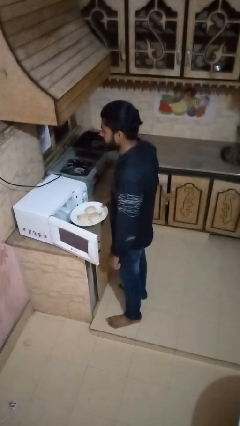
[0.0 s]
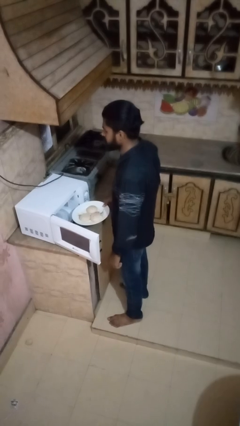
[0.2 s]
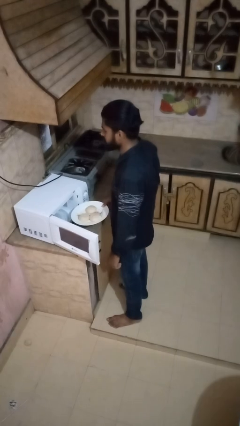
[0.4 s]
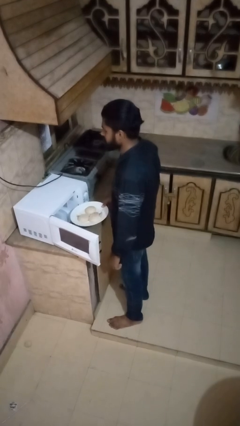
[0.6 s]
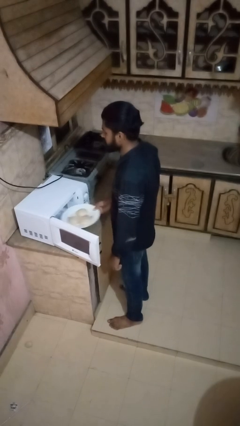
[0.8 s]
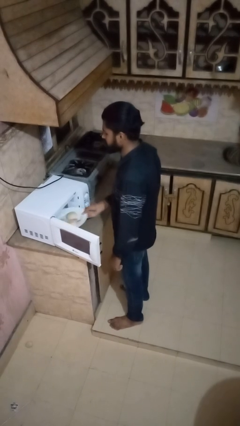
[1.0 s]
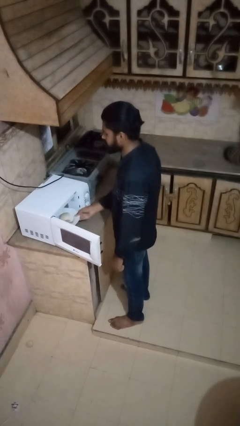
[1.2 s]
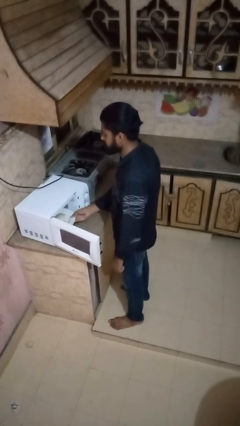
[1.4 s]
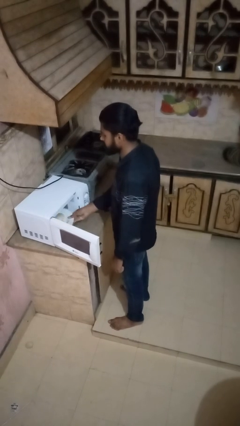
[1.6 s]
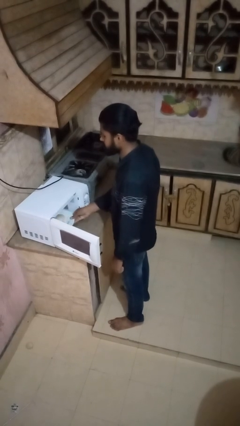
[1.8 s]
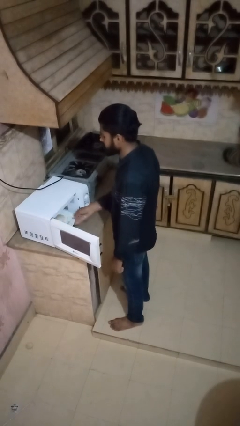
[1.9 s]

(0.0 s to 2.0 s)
person puts object into oven

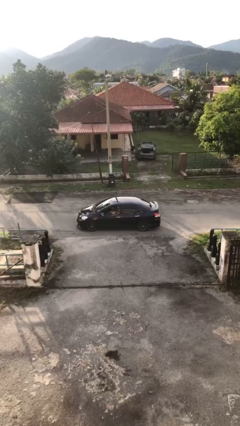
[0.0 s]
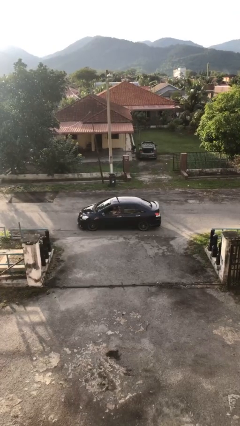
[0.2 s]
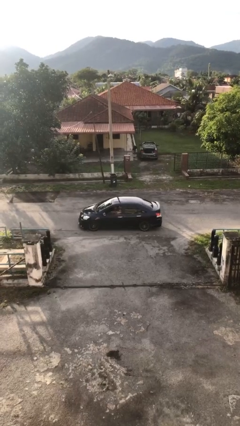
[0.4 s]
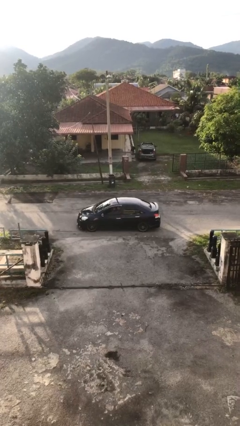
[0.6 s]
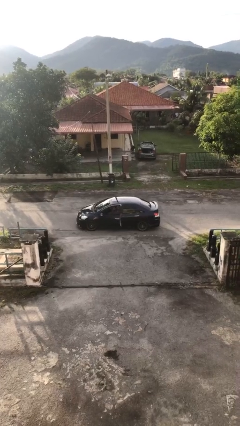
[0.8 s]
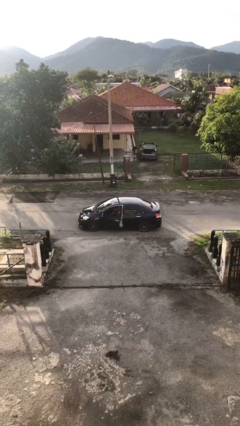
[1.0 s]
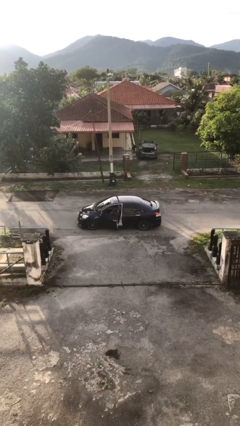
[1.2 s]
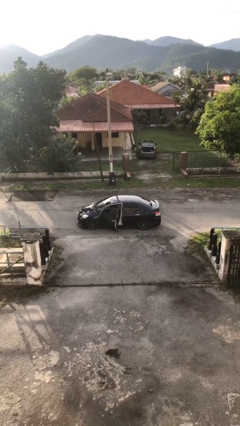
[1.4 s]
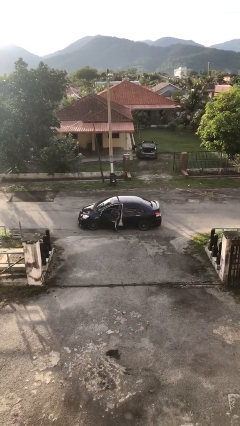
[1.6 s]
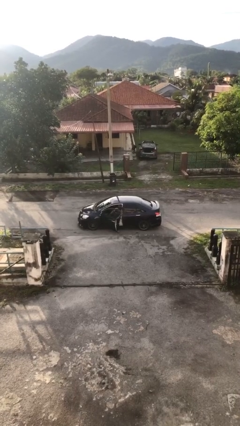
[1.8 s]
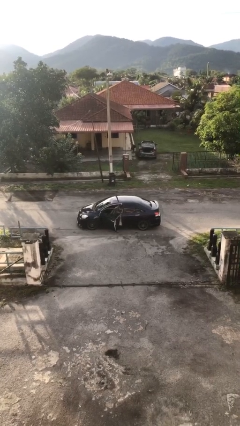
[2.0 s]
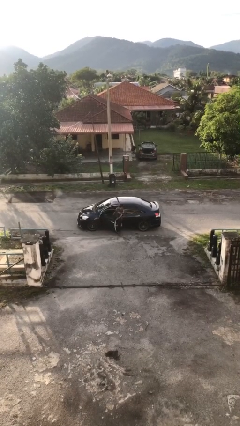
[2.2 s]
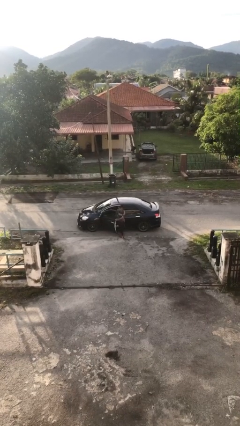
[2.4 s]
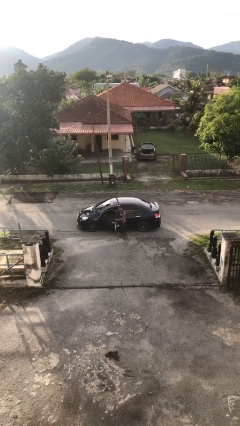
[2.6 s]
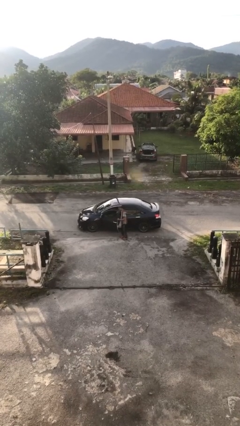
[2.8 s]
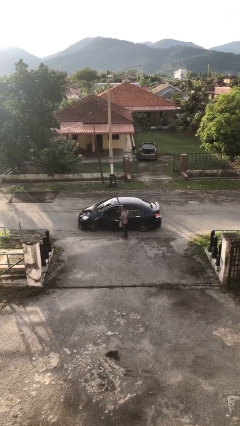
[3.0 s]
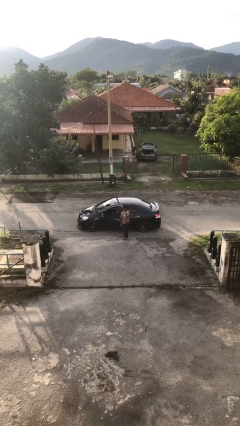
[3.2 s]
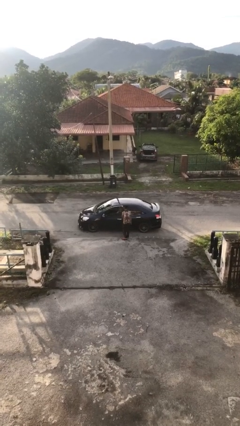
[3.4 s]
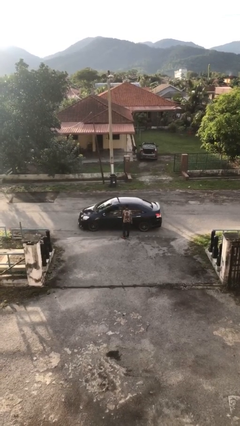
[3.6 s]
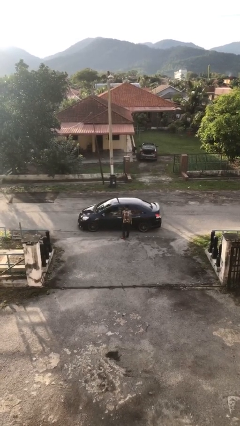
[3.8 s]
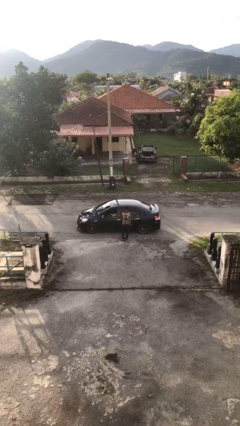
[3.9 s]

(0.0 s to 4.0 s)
car drops off person

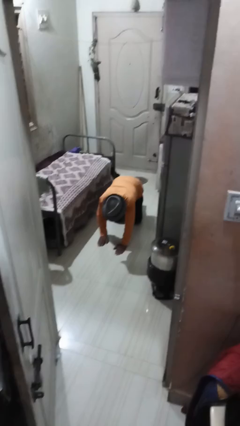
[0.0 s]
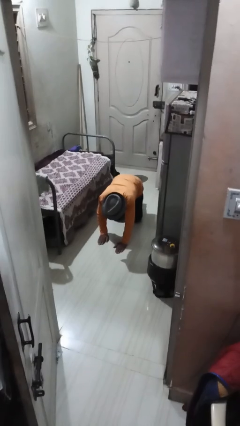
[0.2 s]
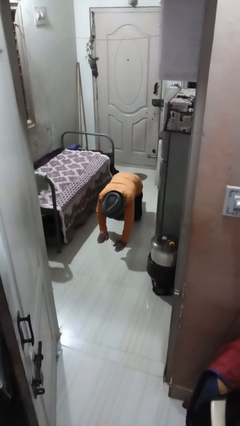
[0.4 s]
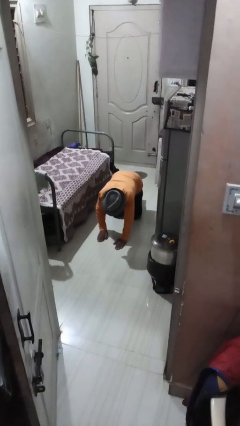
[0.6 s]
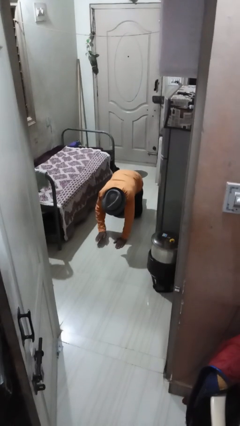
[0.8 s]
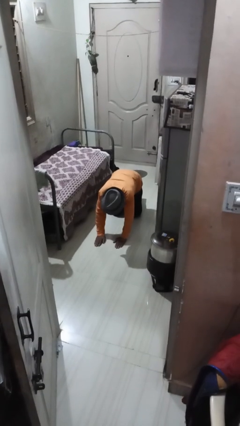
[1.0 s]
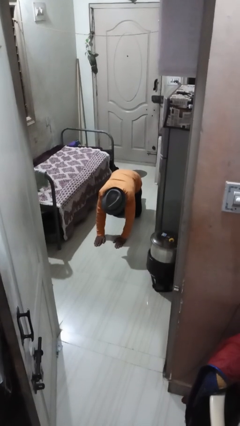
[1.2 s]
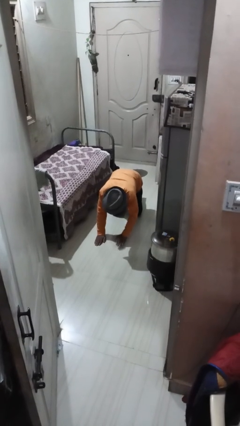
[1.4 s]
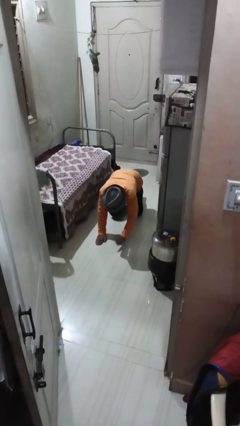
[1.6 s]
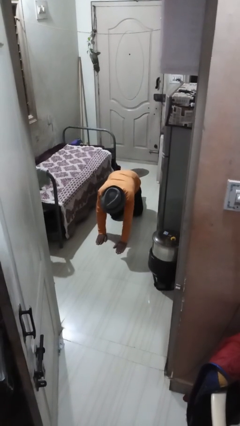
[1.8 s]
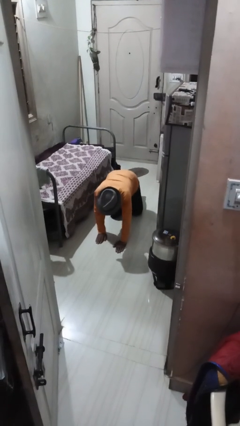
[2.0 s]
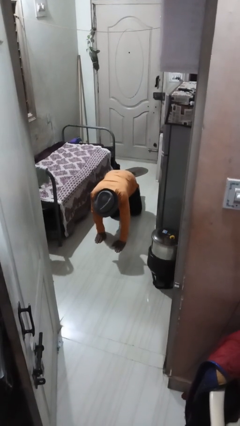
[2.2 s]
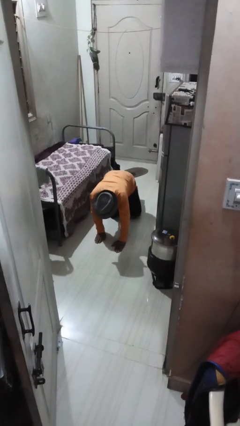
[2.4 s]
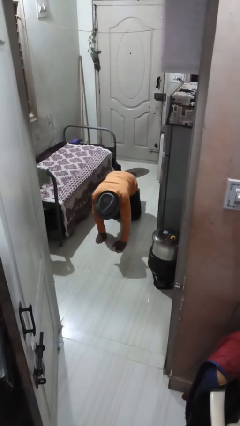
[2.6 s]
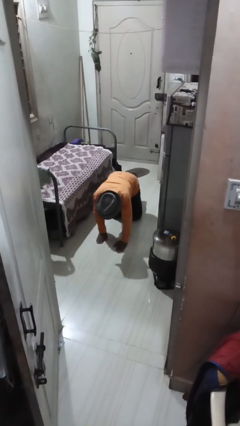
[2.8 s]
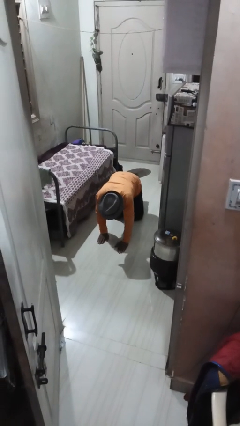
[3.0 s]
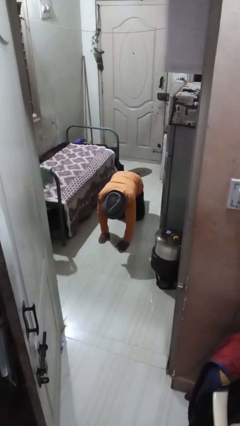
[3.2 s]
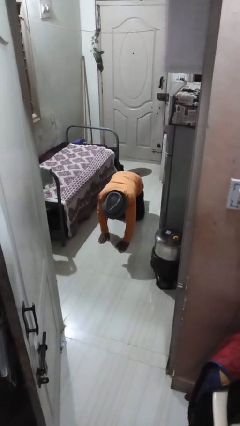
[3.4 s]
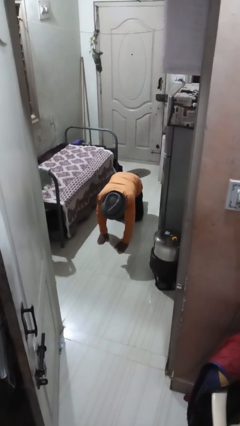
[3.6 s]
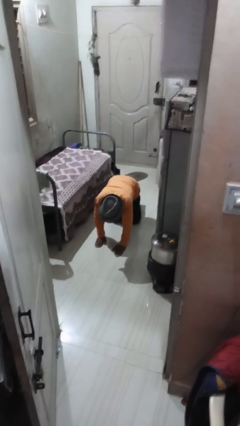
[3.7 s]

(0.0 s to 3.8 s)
person crawls

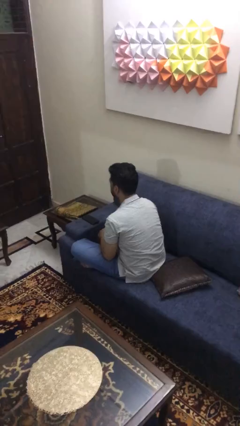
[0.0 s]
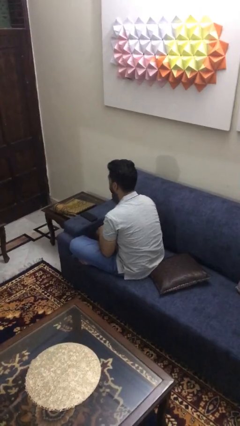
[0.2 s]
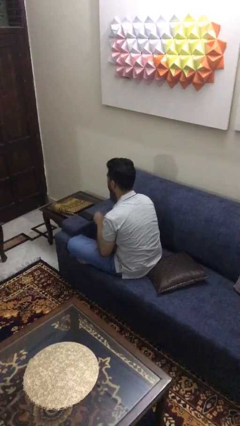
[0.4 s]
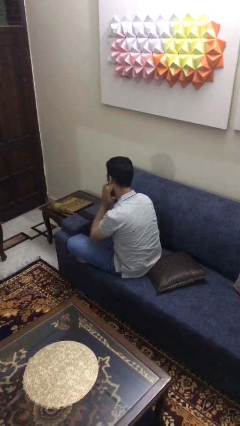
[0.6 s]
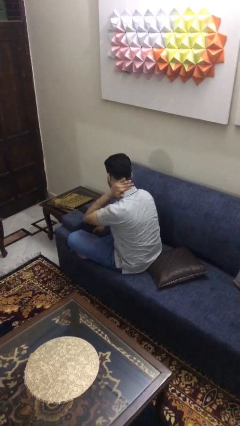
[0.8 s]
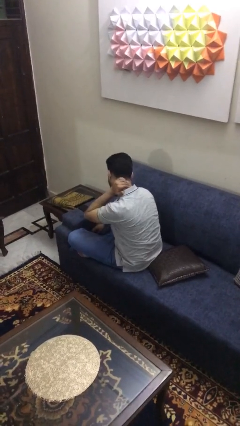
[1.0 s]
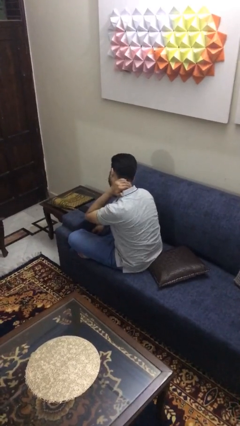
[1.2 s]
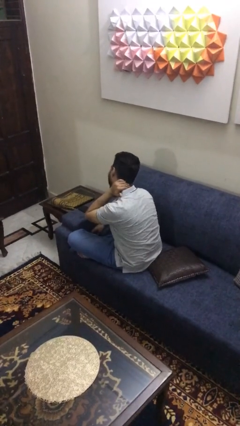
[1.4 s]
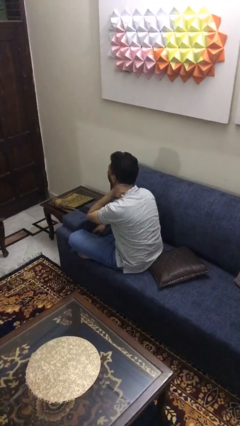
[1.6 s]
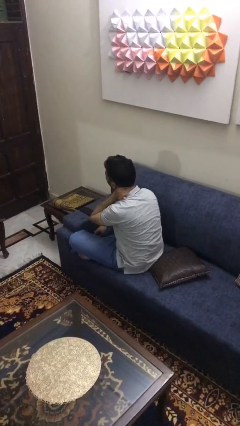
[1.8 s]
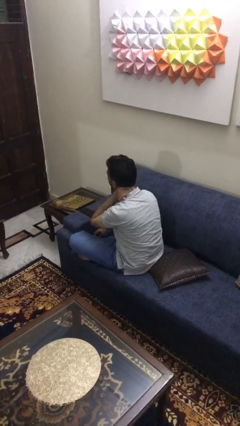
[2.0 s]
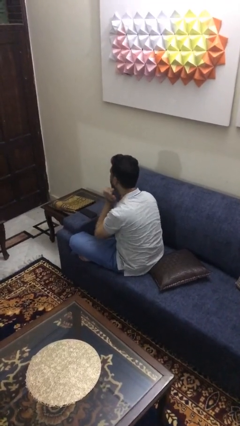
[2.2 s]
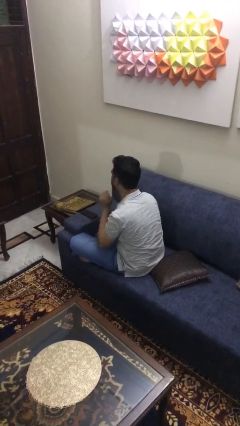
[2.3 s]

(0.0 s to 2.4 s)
person rubs neck

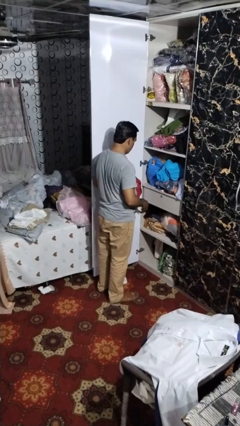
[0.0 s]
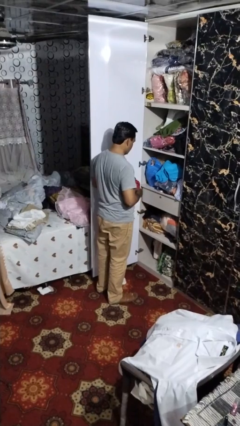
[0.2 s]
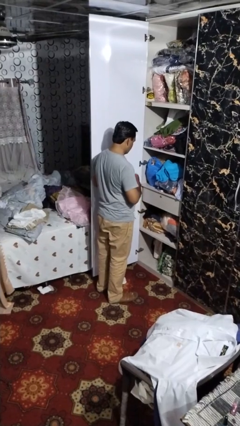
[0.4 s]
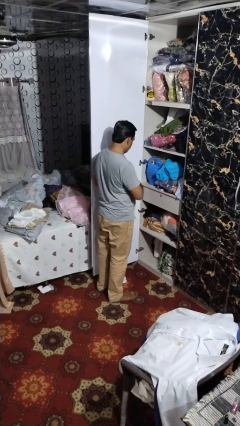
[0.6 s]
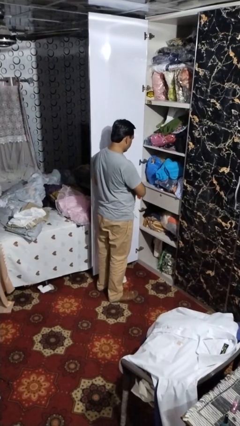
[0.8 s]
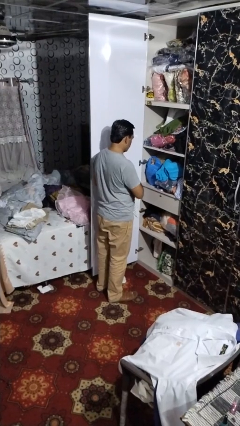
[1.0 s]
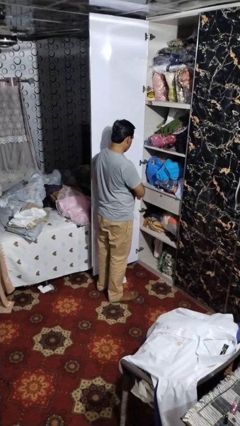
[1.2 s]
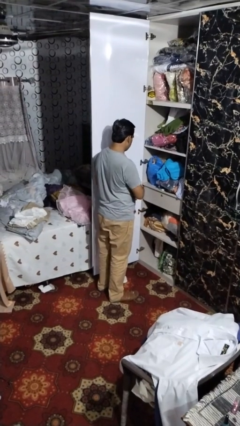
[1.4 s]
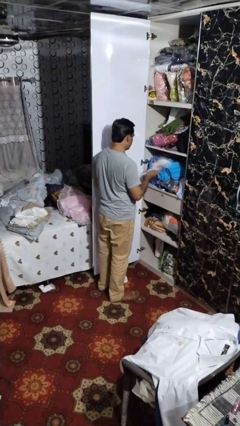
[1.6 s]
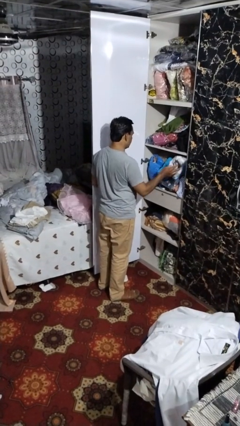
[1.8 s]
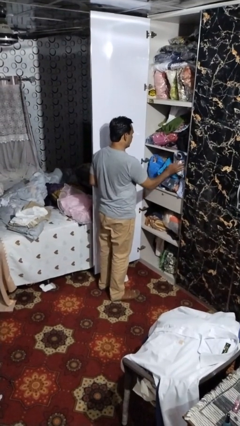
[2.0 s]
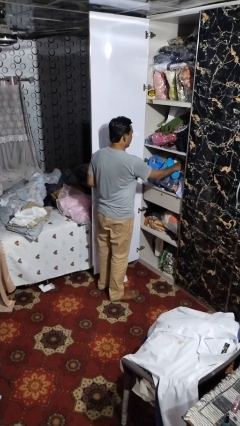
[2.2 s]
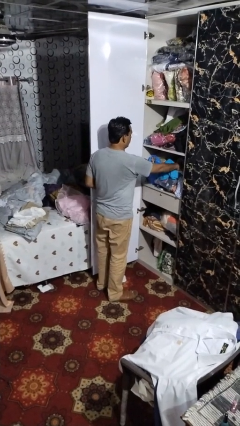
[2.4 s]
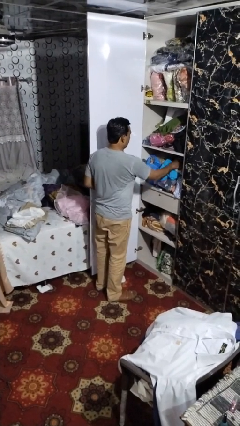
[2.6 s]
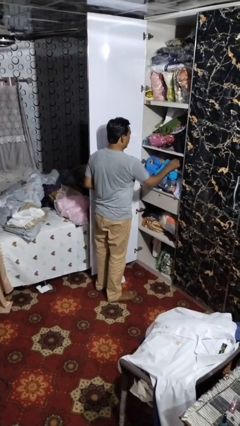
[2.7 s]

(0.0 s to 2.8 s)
person puts clothes into dresser

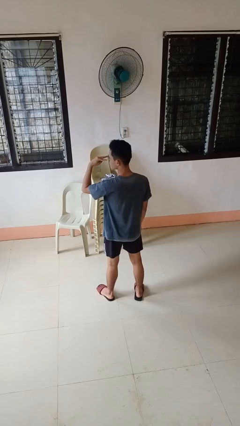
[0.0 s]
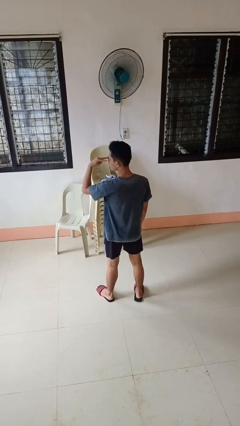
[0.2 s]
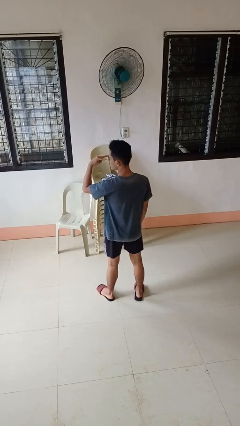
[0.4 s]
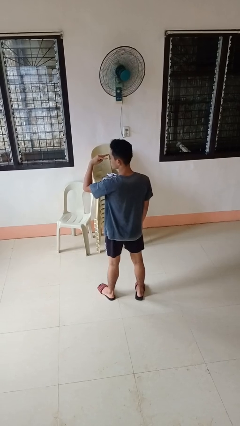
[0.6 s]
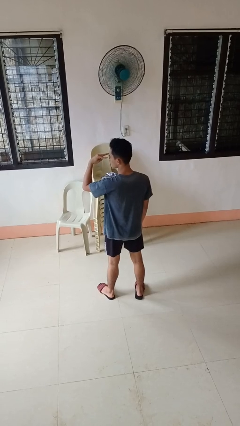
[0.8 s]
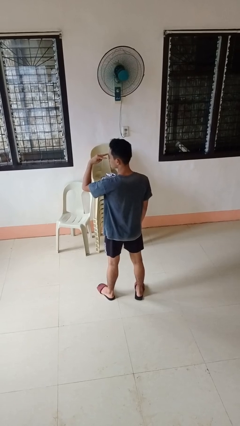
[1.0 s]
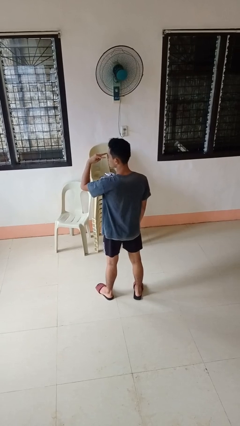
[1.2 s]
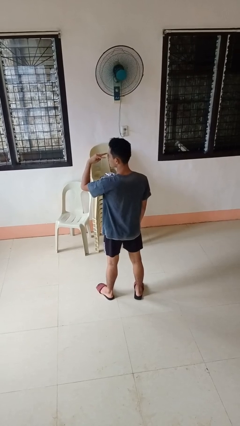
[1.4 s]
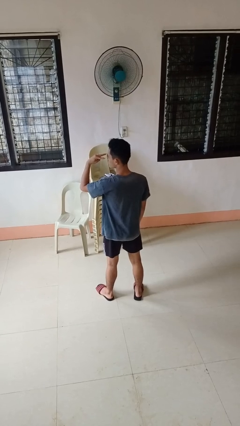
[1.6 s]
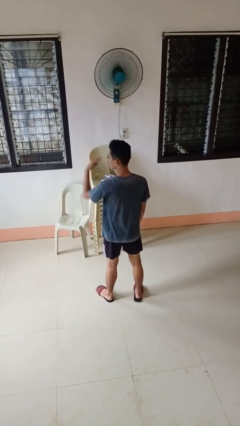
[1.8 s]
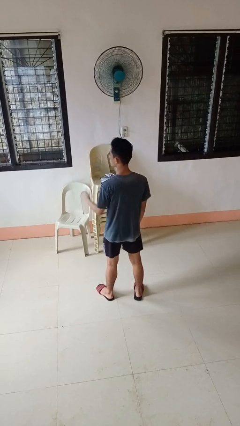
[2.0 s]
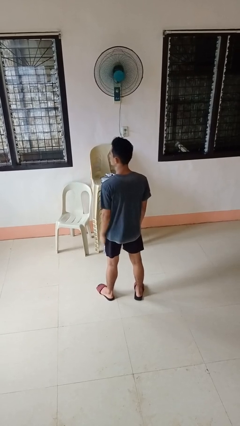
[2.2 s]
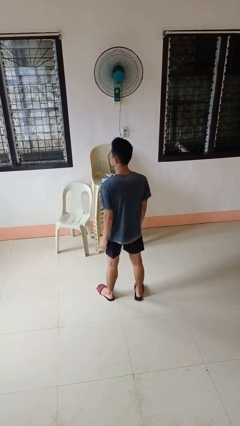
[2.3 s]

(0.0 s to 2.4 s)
person gestures watch closely

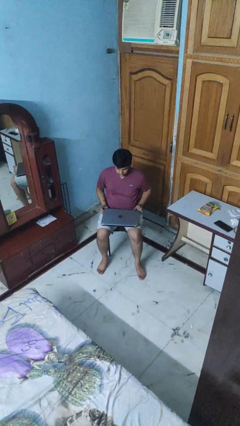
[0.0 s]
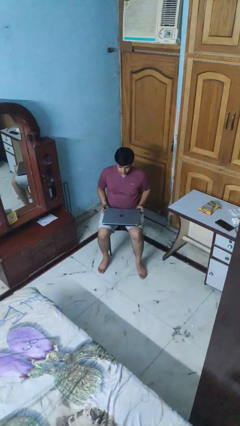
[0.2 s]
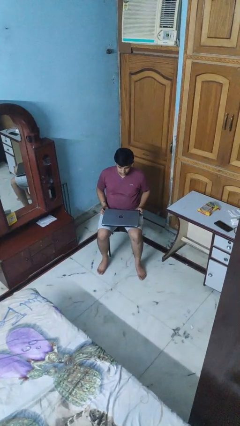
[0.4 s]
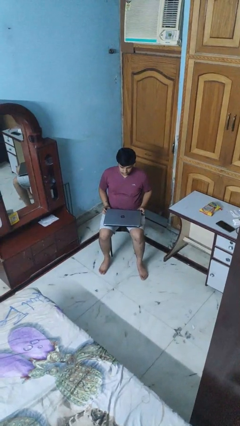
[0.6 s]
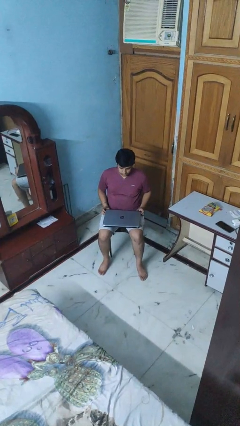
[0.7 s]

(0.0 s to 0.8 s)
person closes laptop
